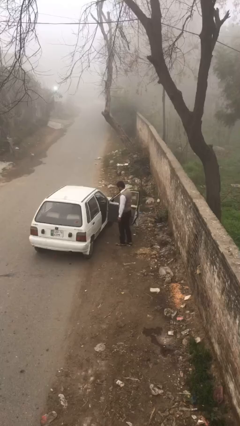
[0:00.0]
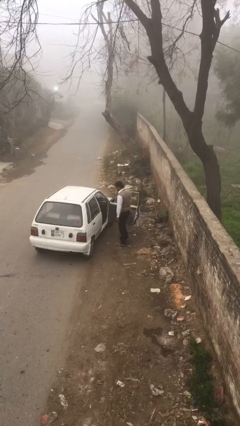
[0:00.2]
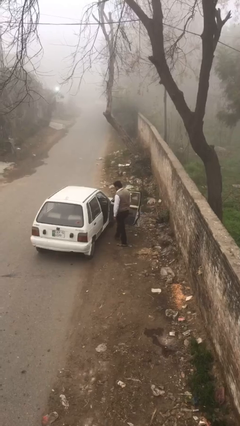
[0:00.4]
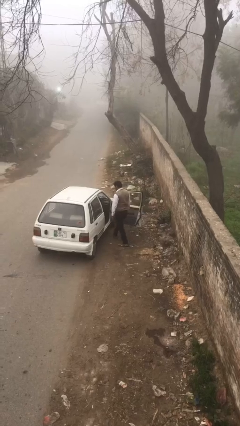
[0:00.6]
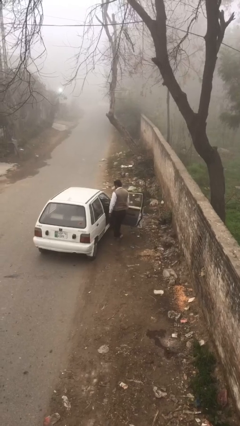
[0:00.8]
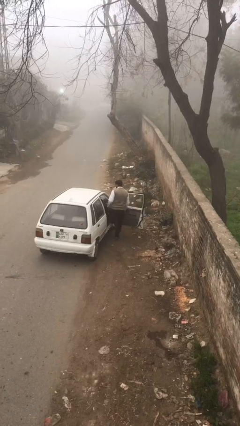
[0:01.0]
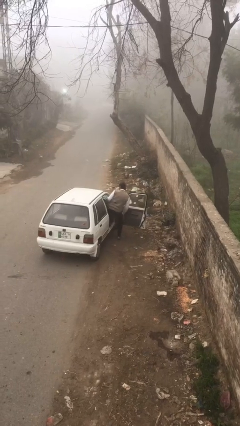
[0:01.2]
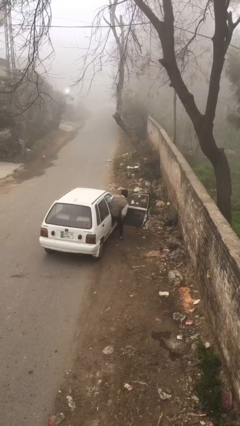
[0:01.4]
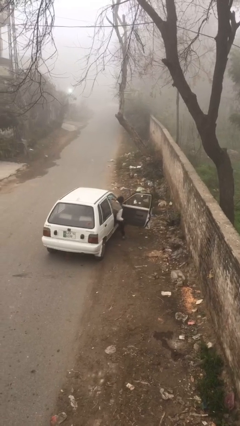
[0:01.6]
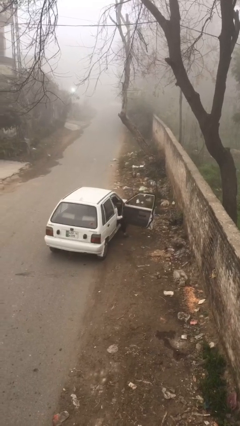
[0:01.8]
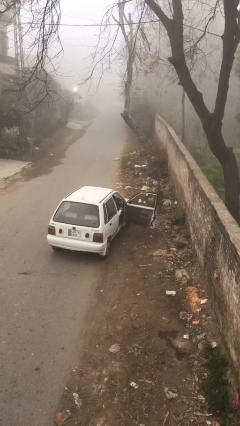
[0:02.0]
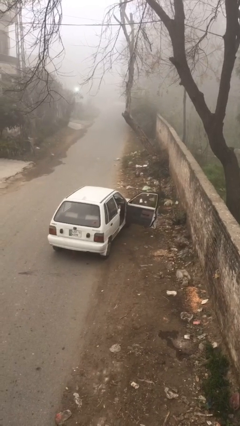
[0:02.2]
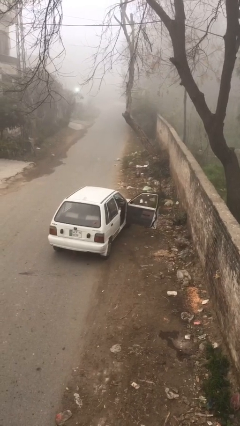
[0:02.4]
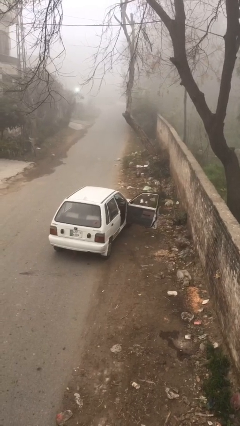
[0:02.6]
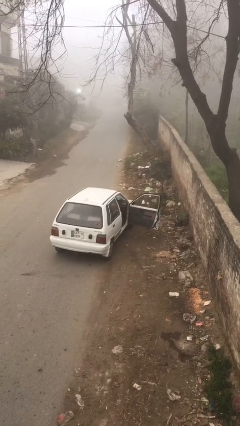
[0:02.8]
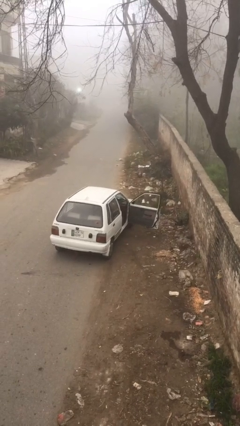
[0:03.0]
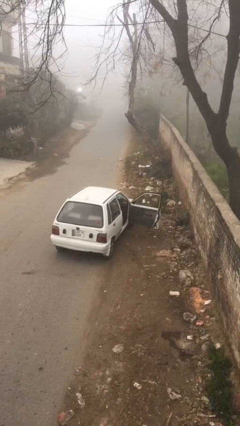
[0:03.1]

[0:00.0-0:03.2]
person enters car

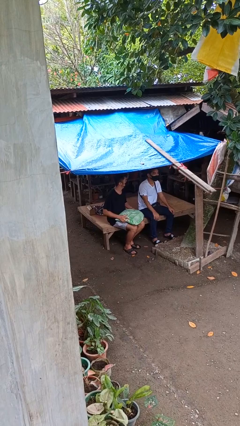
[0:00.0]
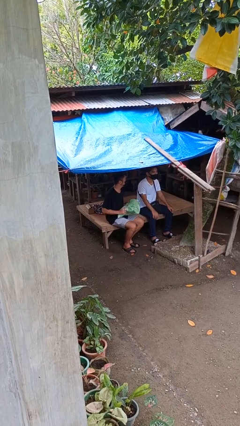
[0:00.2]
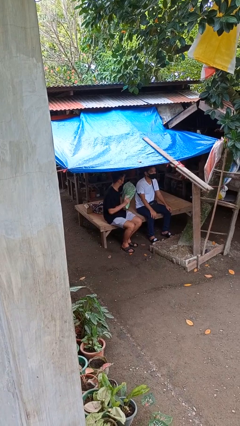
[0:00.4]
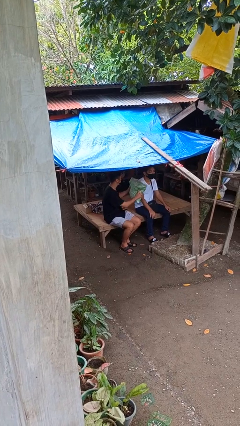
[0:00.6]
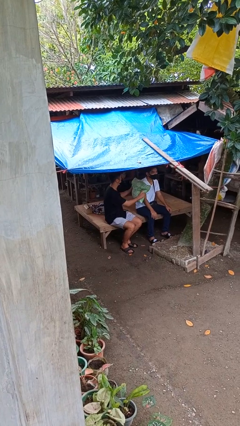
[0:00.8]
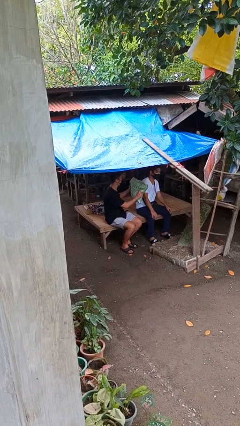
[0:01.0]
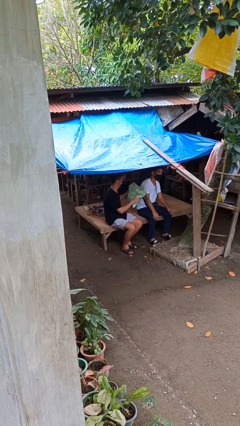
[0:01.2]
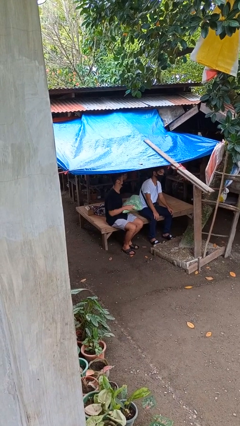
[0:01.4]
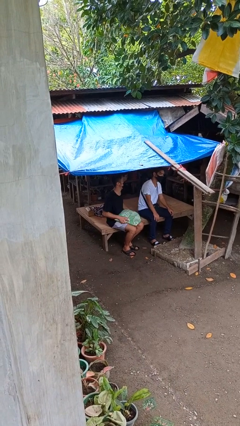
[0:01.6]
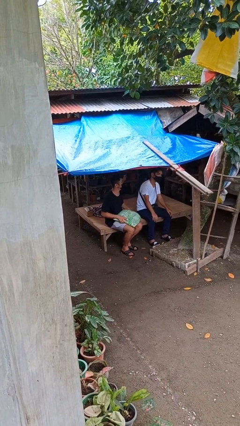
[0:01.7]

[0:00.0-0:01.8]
person hits person with pillow

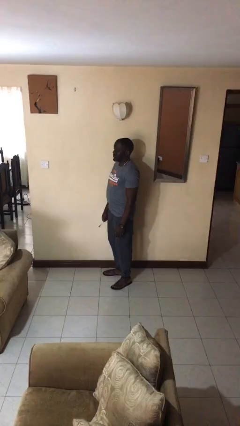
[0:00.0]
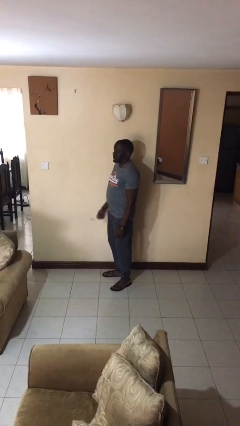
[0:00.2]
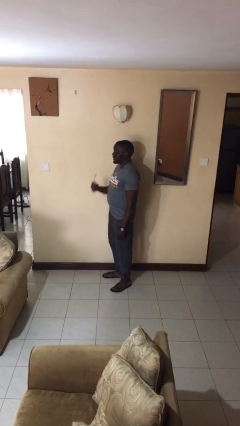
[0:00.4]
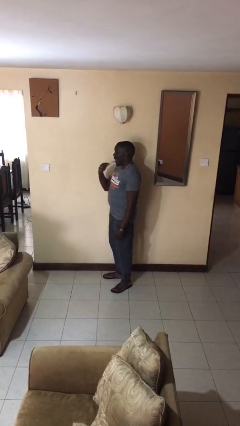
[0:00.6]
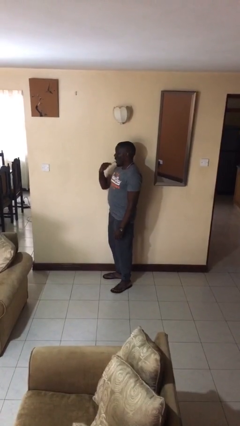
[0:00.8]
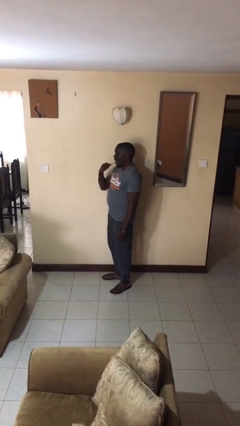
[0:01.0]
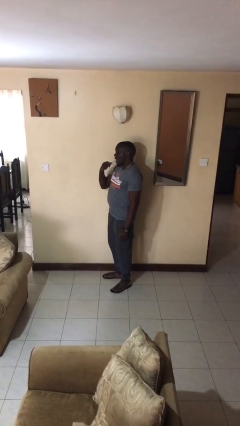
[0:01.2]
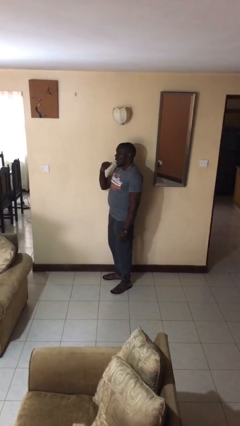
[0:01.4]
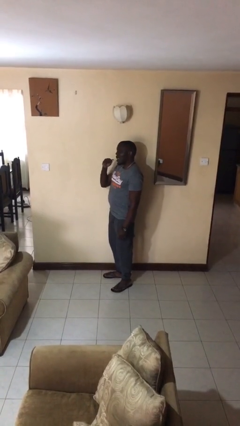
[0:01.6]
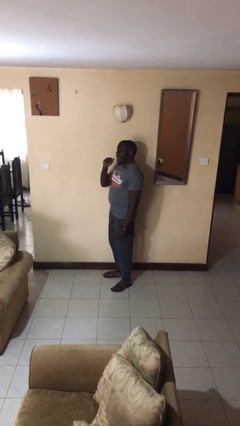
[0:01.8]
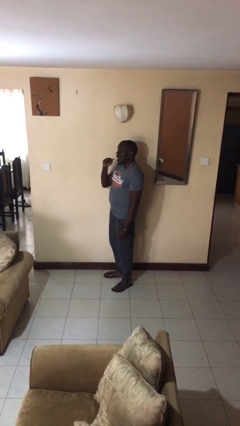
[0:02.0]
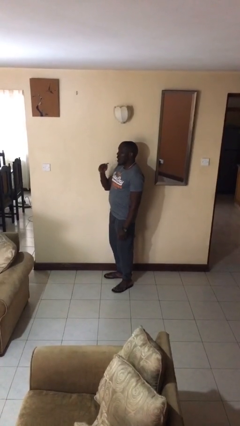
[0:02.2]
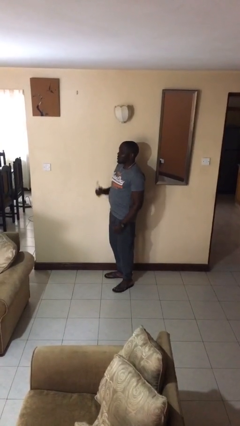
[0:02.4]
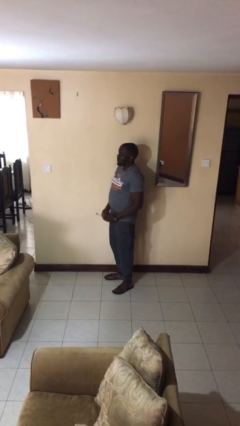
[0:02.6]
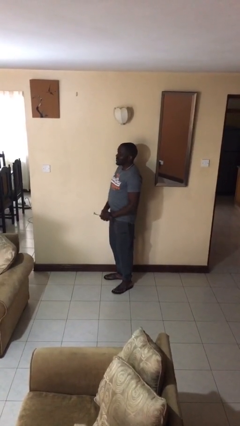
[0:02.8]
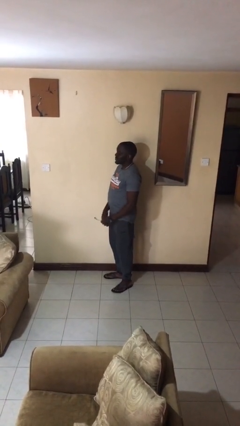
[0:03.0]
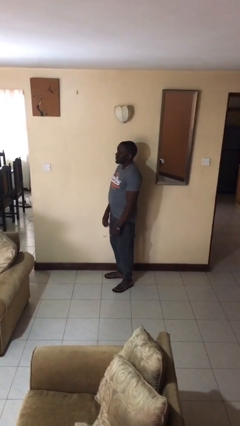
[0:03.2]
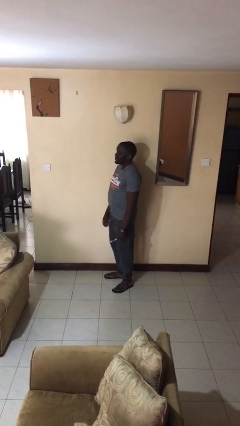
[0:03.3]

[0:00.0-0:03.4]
person brushes teeth

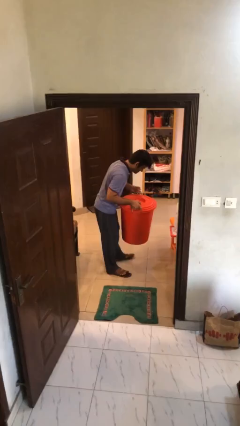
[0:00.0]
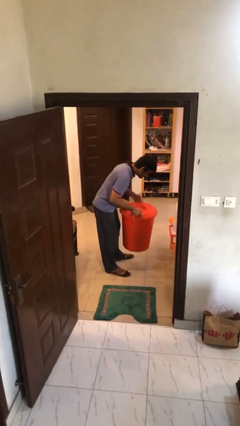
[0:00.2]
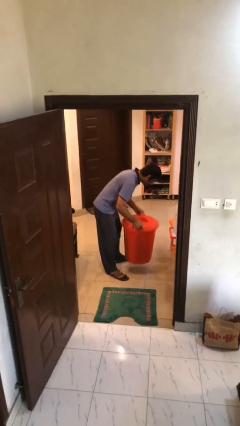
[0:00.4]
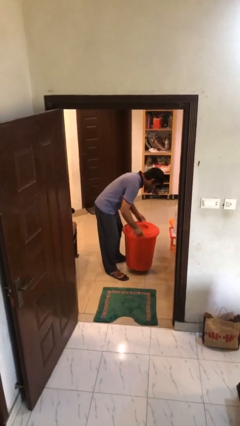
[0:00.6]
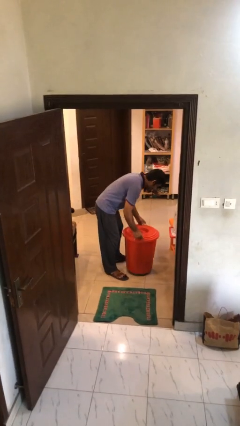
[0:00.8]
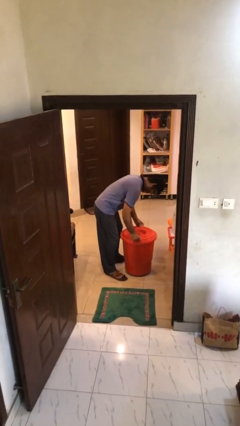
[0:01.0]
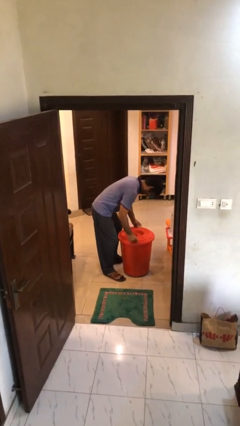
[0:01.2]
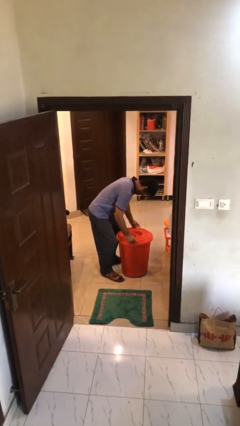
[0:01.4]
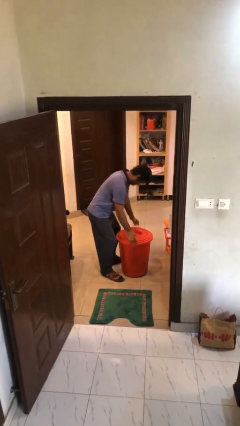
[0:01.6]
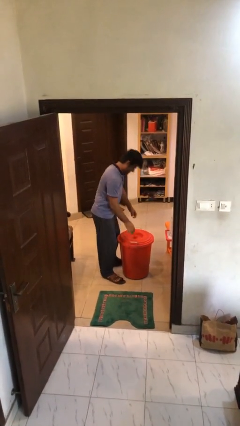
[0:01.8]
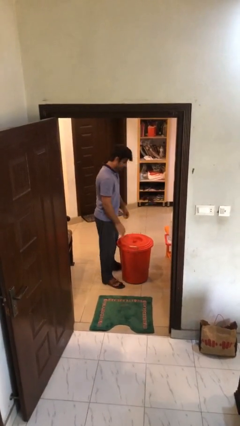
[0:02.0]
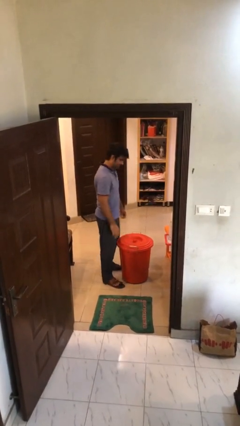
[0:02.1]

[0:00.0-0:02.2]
person puts down object on floor

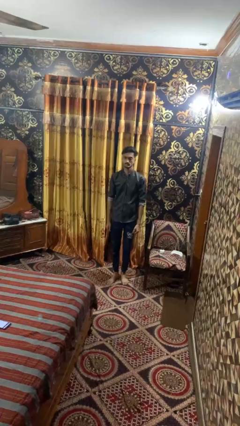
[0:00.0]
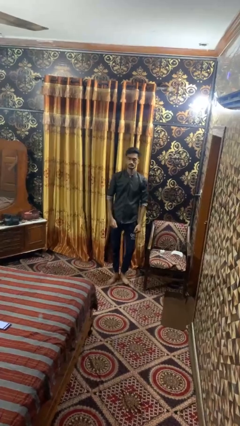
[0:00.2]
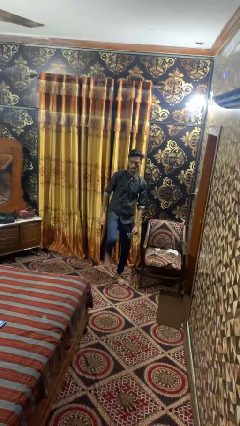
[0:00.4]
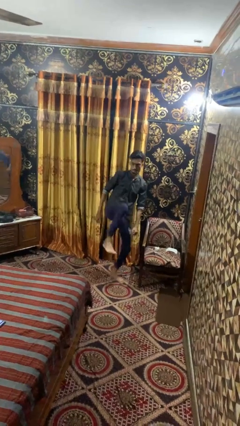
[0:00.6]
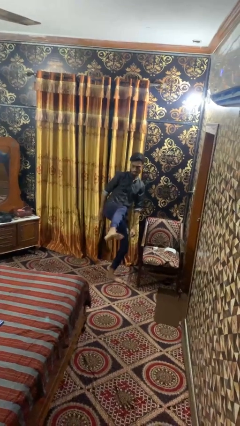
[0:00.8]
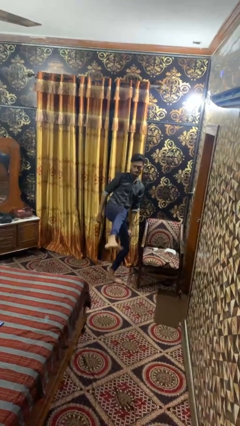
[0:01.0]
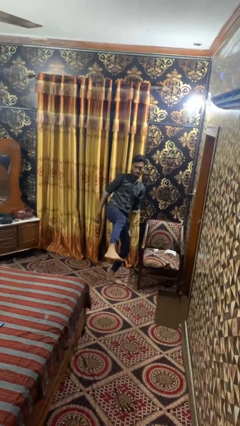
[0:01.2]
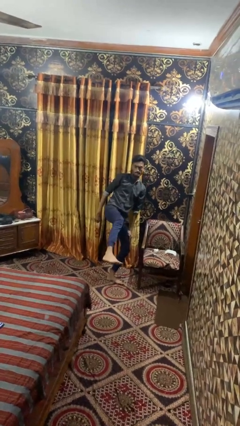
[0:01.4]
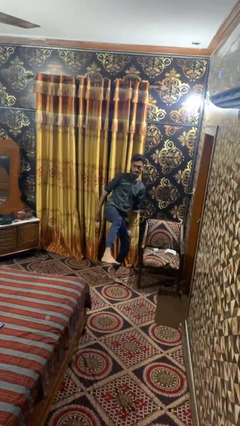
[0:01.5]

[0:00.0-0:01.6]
person karate kicks

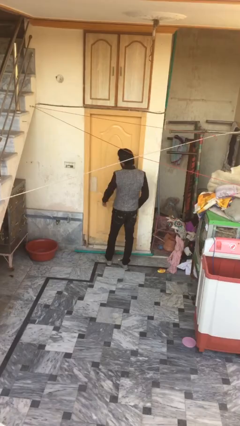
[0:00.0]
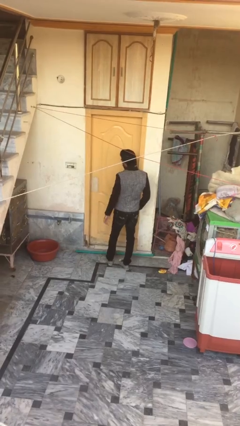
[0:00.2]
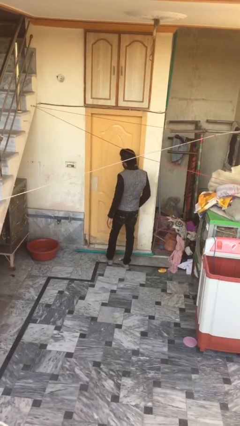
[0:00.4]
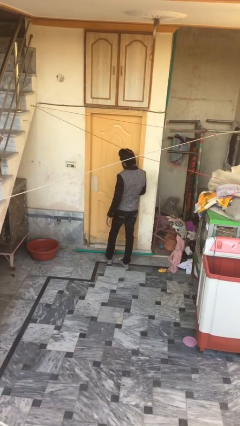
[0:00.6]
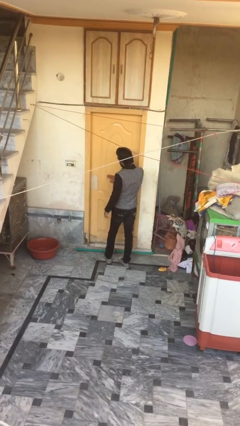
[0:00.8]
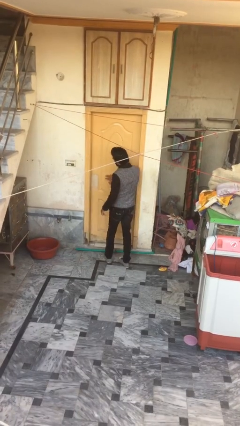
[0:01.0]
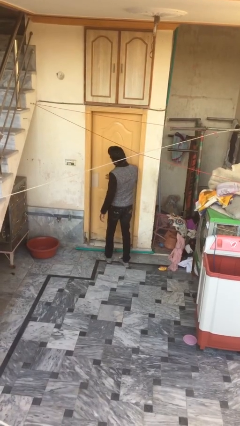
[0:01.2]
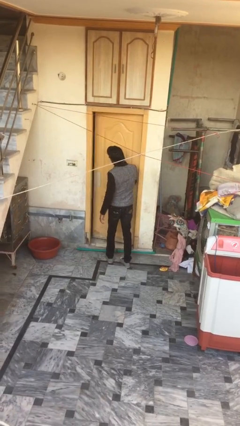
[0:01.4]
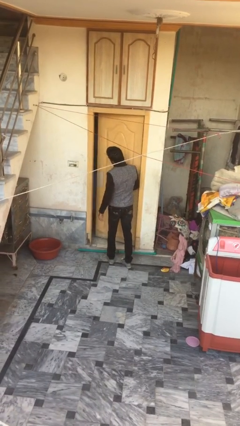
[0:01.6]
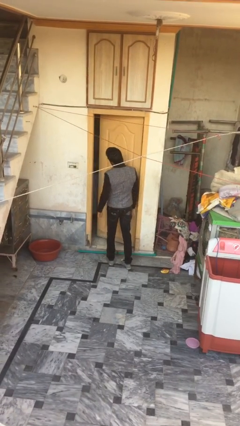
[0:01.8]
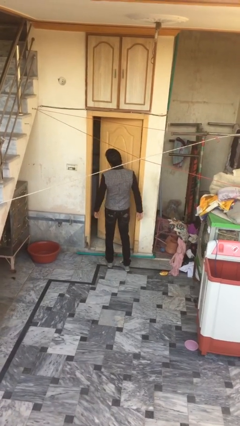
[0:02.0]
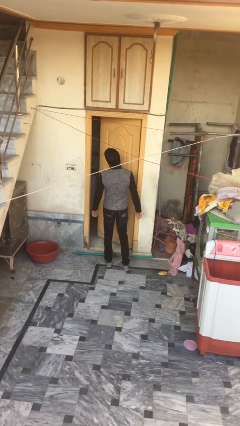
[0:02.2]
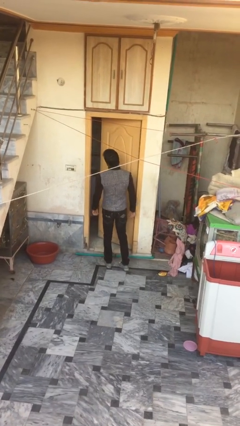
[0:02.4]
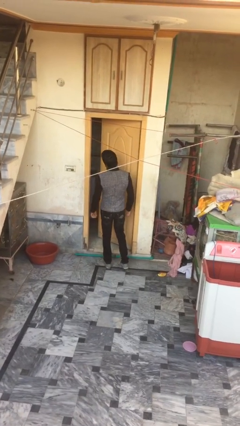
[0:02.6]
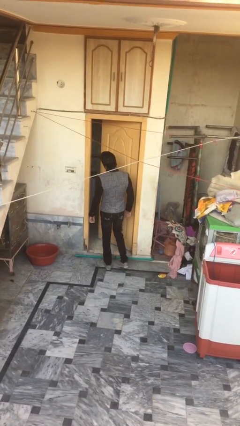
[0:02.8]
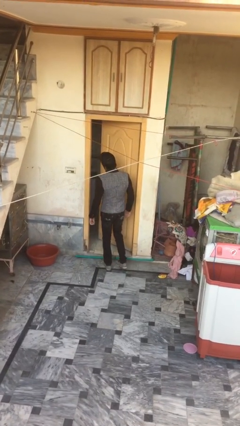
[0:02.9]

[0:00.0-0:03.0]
person opens facility door

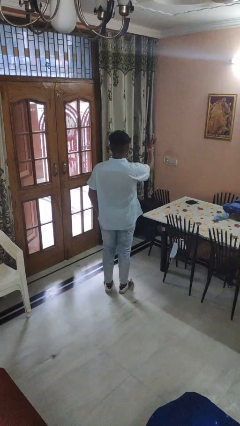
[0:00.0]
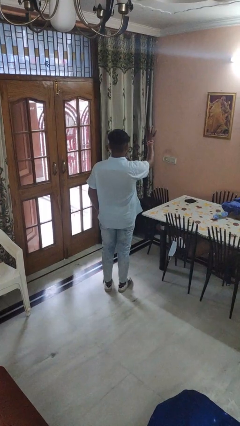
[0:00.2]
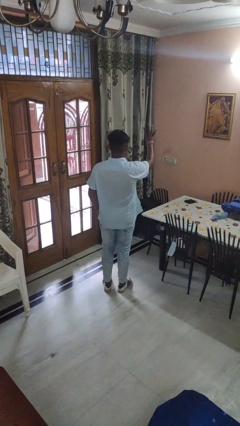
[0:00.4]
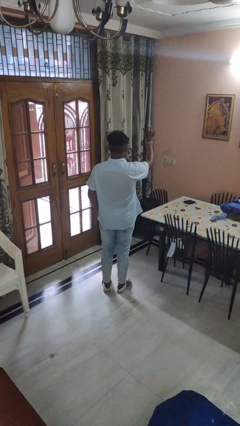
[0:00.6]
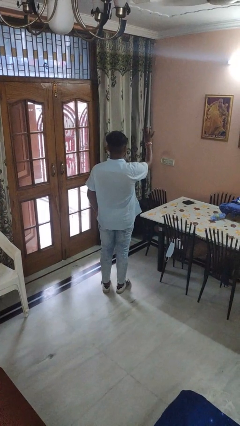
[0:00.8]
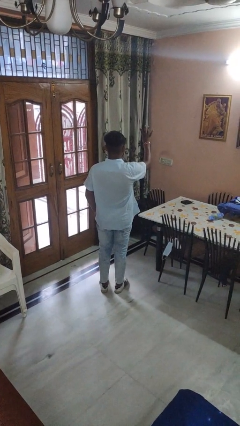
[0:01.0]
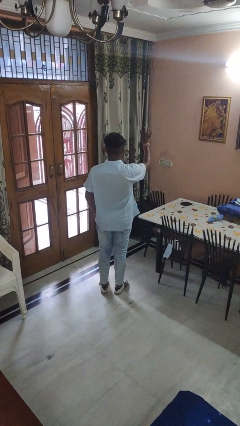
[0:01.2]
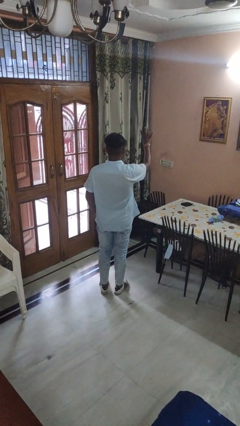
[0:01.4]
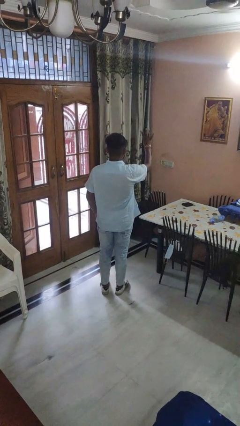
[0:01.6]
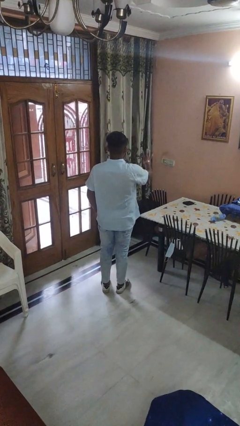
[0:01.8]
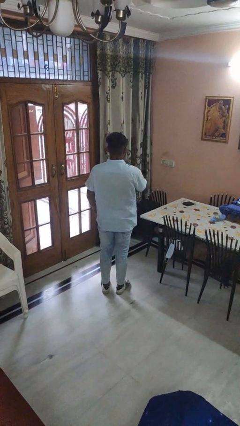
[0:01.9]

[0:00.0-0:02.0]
person gestures number four
